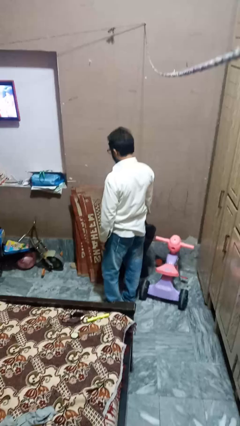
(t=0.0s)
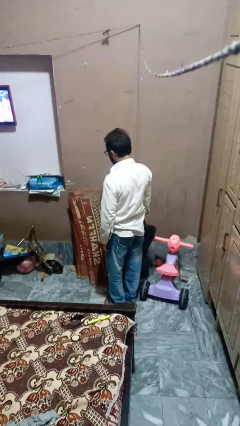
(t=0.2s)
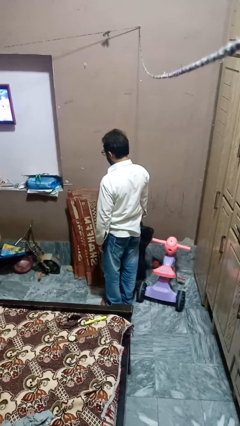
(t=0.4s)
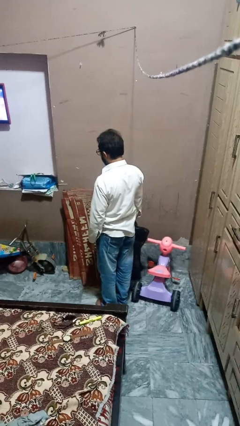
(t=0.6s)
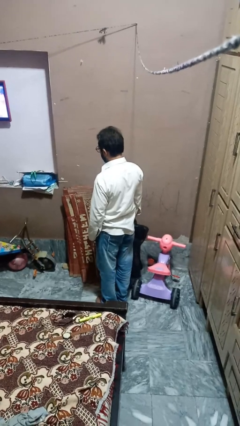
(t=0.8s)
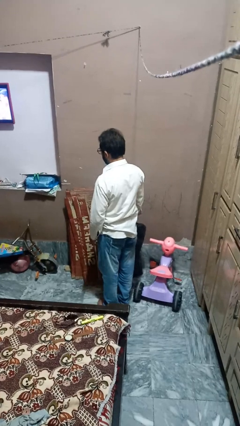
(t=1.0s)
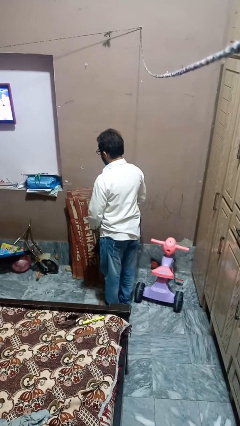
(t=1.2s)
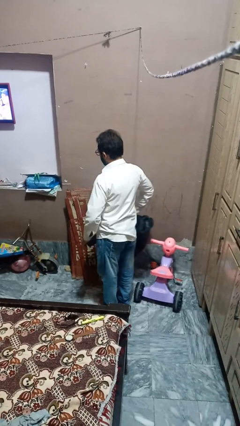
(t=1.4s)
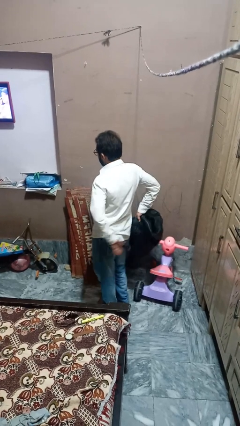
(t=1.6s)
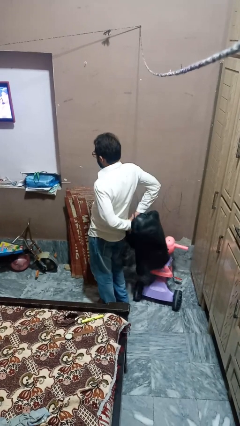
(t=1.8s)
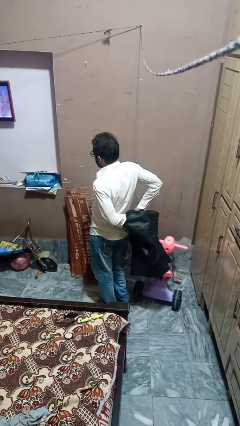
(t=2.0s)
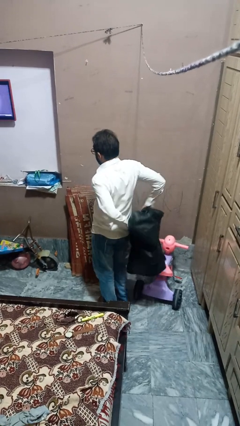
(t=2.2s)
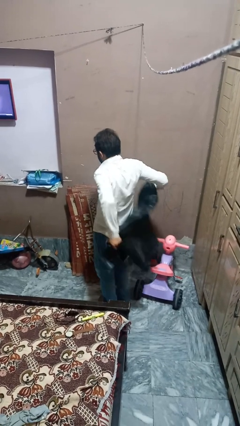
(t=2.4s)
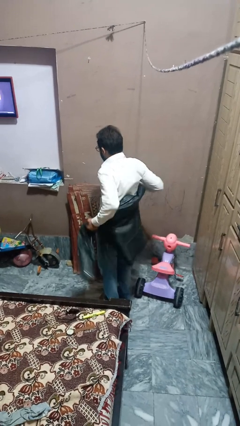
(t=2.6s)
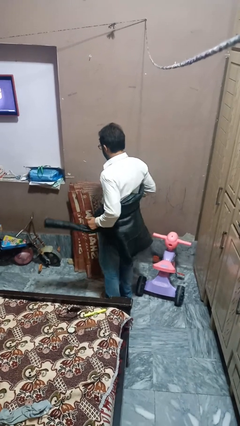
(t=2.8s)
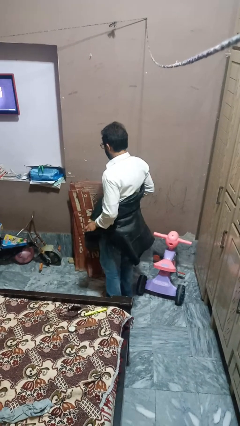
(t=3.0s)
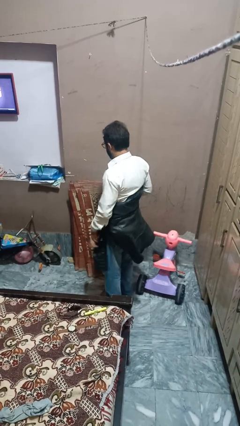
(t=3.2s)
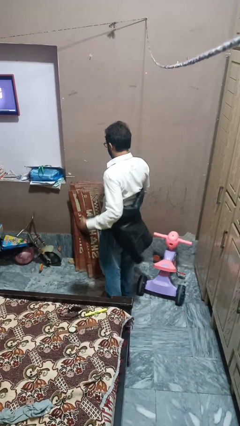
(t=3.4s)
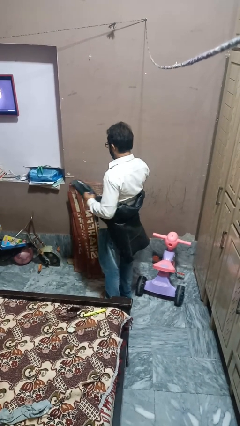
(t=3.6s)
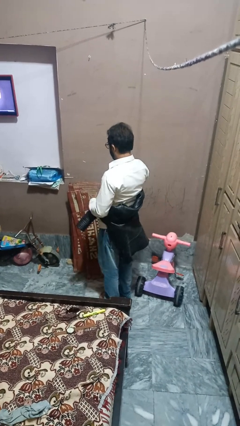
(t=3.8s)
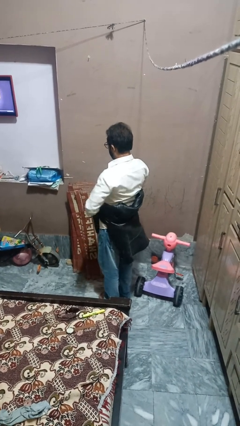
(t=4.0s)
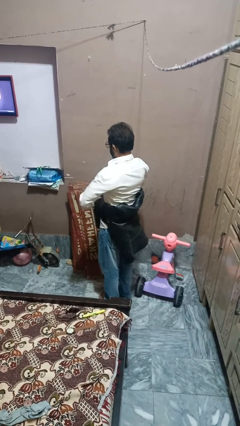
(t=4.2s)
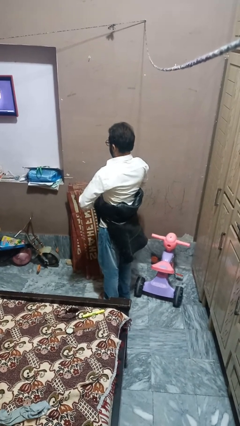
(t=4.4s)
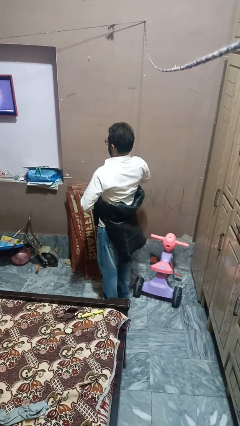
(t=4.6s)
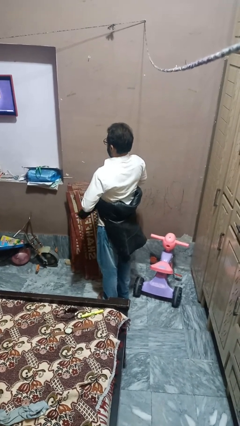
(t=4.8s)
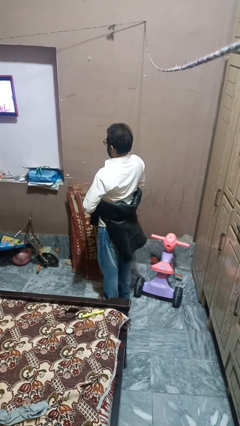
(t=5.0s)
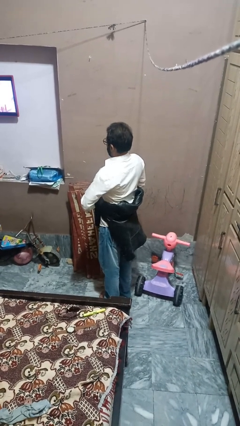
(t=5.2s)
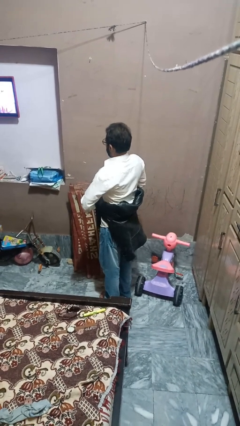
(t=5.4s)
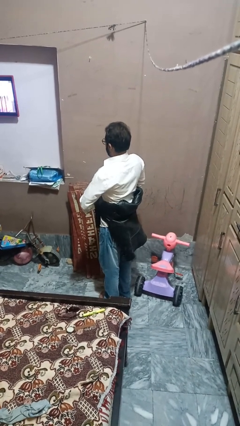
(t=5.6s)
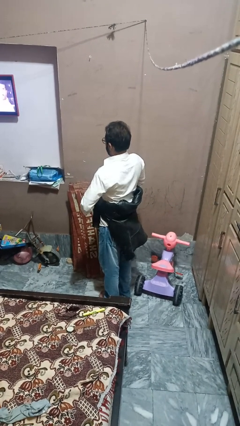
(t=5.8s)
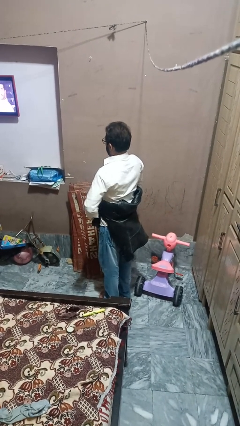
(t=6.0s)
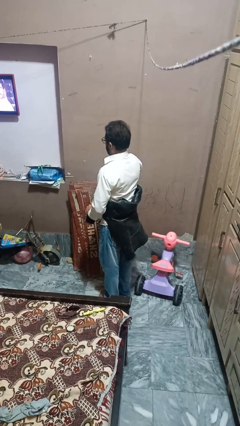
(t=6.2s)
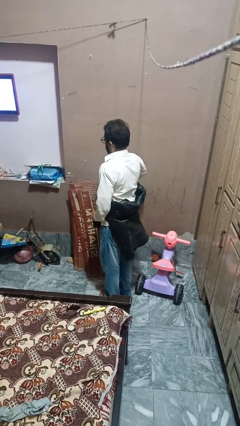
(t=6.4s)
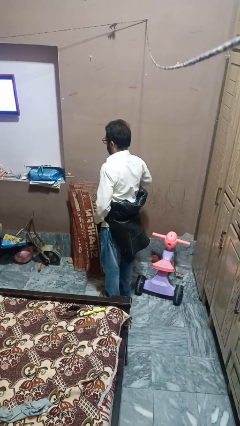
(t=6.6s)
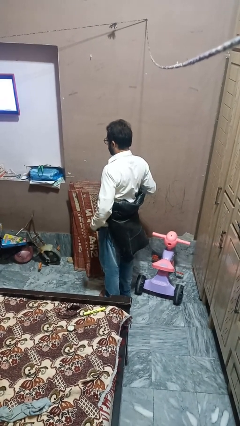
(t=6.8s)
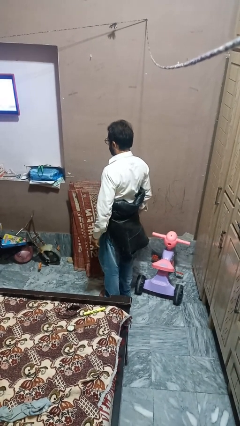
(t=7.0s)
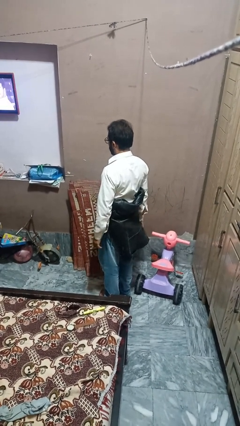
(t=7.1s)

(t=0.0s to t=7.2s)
person ties jacket around waist

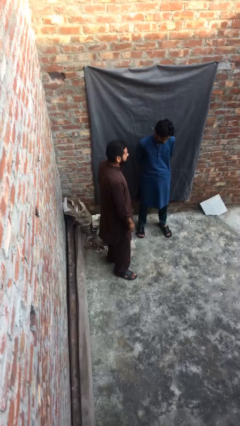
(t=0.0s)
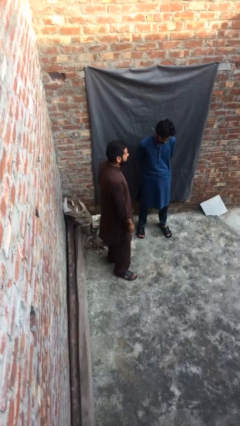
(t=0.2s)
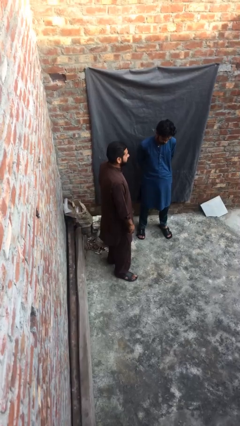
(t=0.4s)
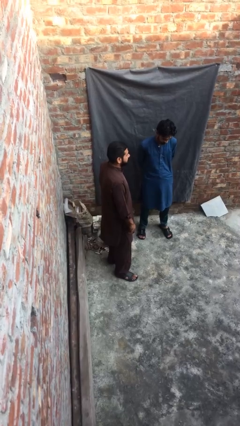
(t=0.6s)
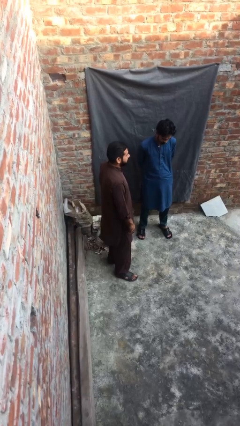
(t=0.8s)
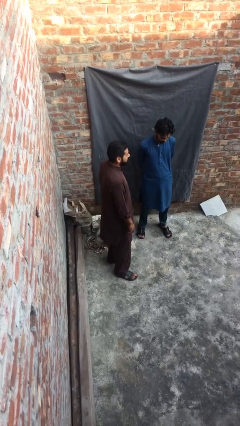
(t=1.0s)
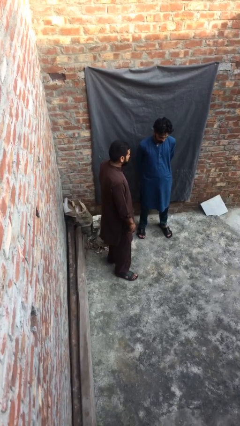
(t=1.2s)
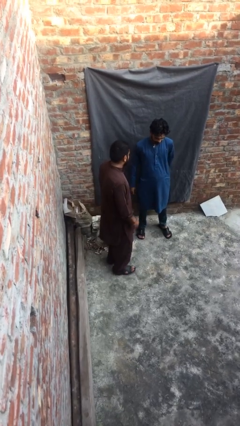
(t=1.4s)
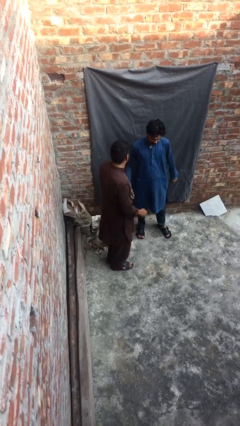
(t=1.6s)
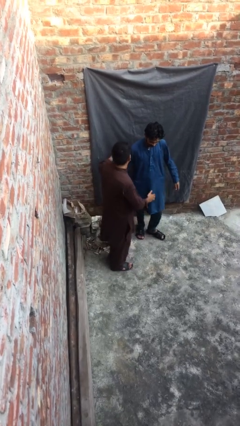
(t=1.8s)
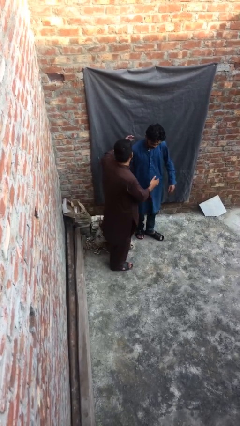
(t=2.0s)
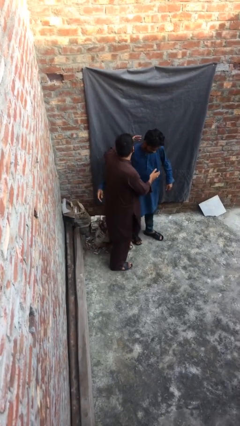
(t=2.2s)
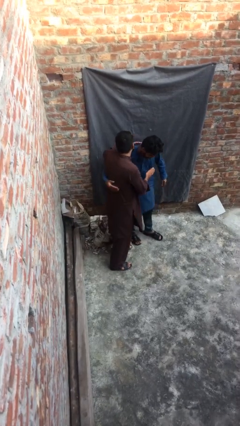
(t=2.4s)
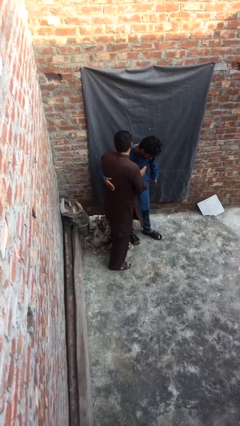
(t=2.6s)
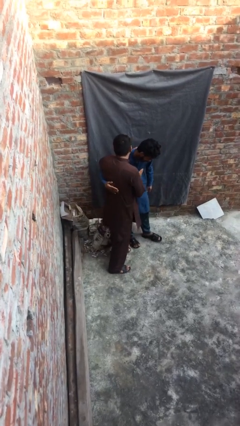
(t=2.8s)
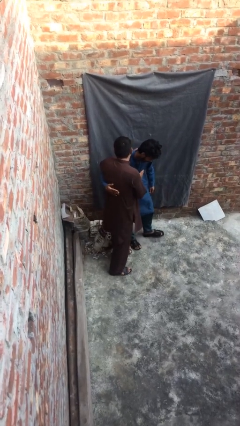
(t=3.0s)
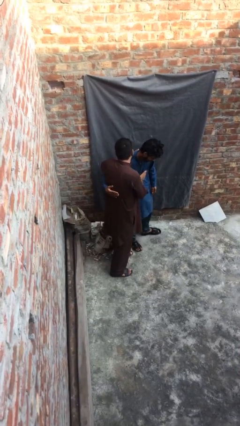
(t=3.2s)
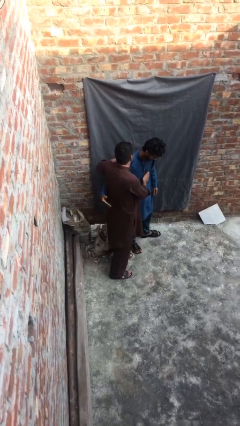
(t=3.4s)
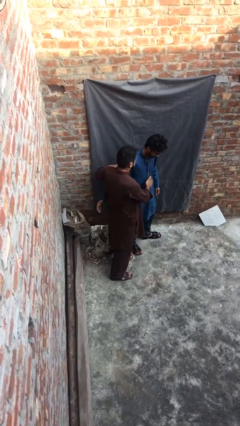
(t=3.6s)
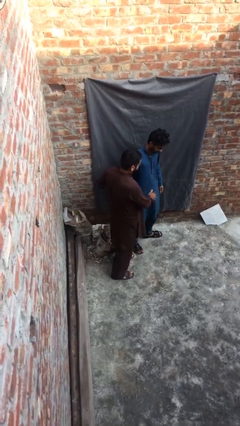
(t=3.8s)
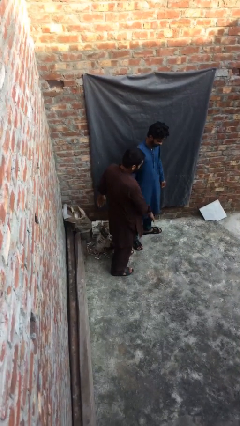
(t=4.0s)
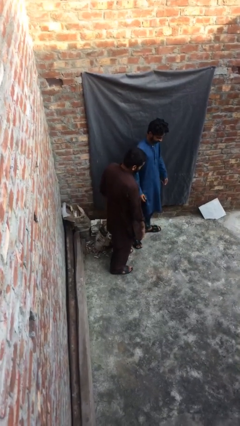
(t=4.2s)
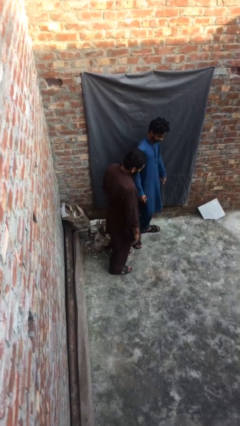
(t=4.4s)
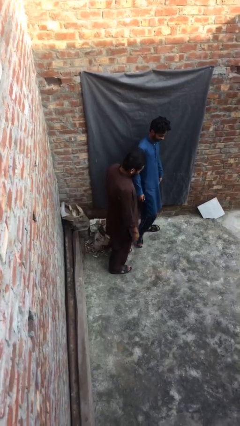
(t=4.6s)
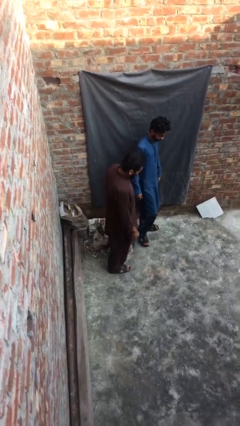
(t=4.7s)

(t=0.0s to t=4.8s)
person embraces person

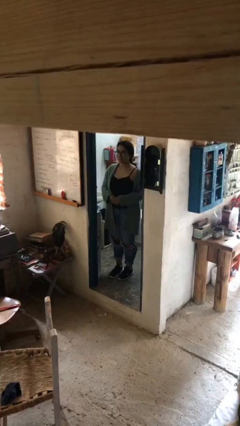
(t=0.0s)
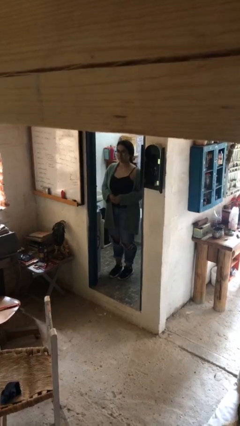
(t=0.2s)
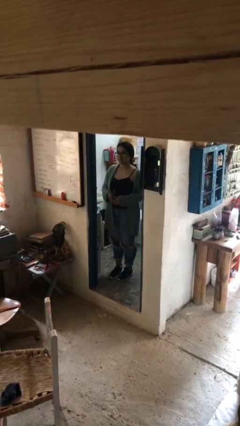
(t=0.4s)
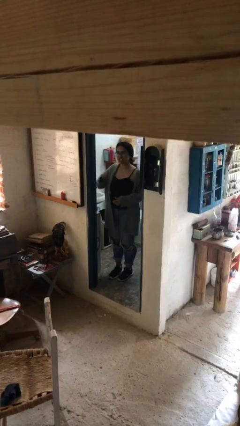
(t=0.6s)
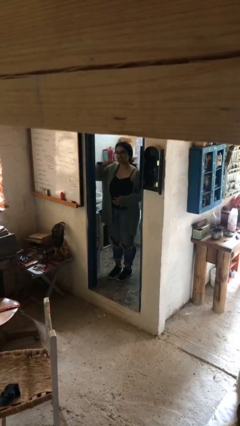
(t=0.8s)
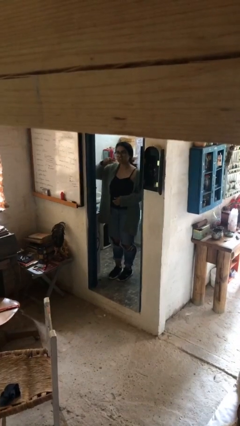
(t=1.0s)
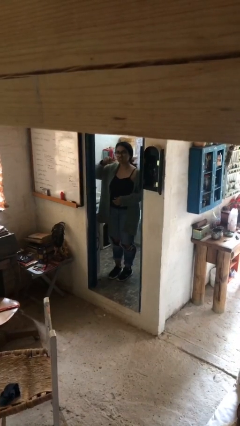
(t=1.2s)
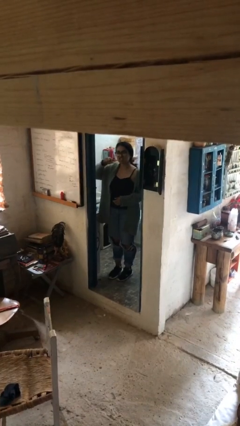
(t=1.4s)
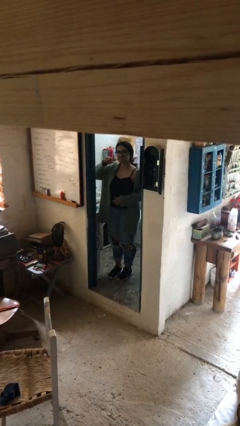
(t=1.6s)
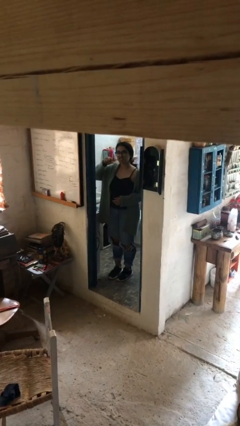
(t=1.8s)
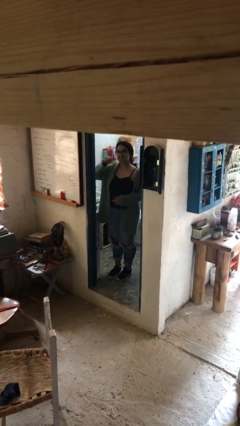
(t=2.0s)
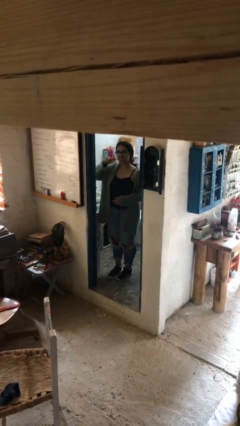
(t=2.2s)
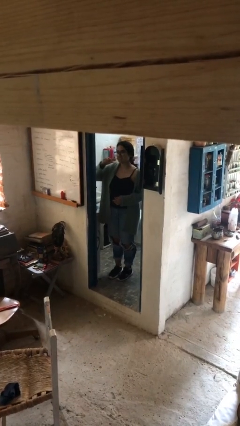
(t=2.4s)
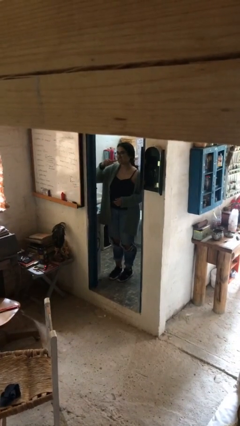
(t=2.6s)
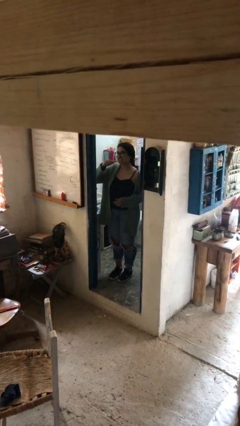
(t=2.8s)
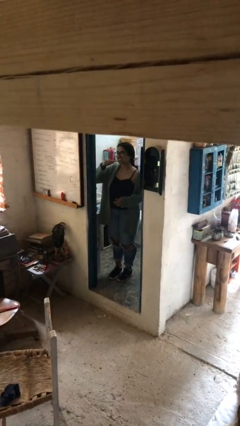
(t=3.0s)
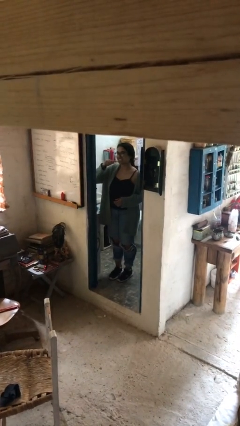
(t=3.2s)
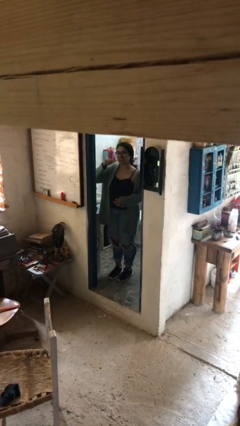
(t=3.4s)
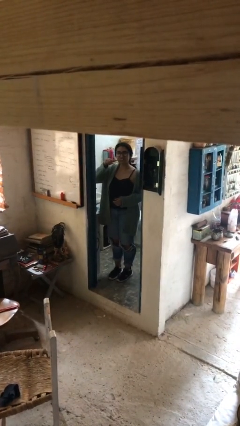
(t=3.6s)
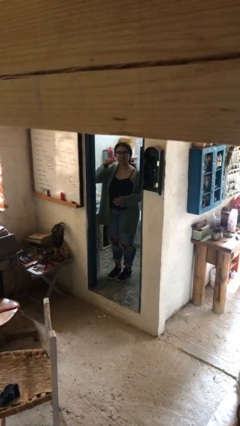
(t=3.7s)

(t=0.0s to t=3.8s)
person brushes teeth

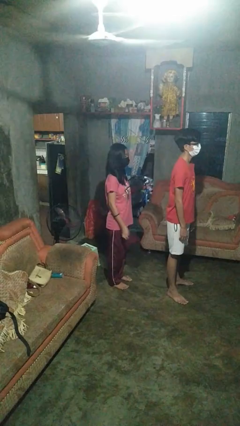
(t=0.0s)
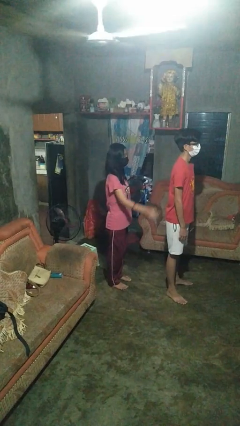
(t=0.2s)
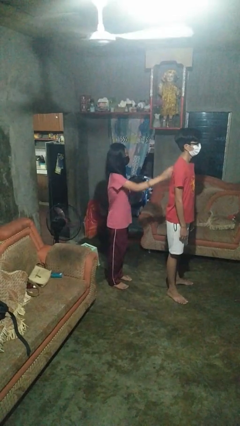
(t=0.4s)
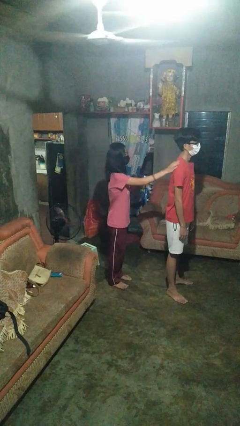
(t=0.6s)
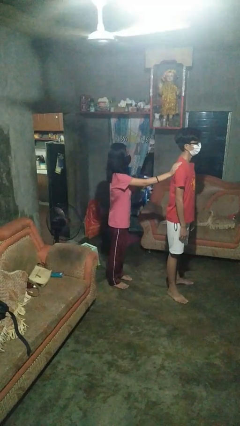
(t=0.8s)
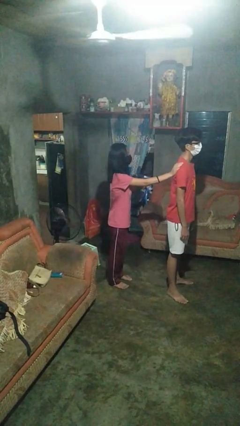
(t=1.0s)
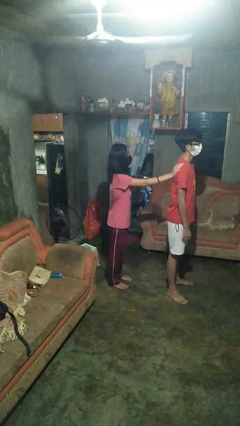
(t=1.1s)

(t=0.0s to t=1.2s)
person touches back of person
